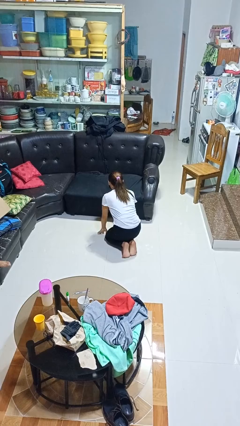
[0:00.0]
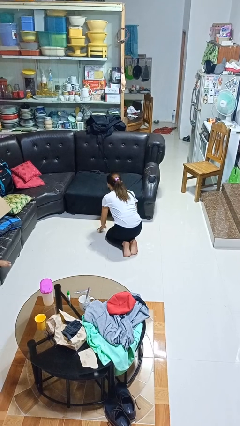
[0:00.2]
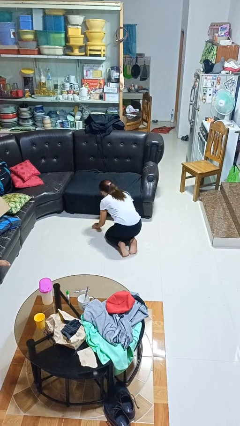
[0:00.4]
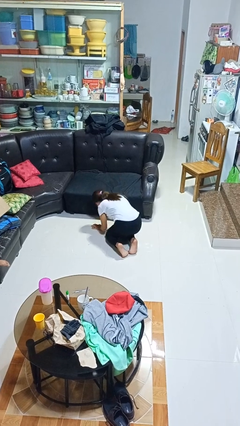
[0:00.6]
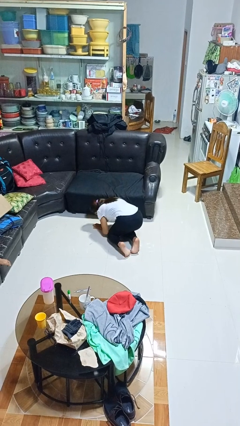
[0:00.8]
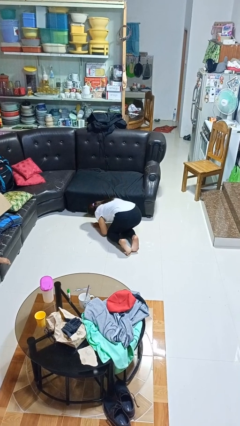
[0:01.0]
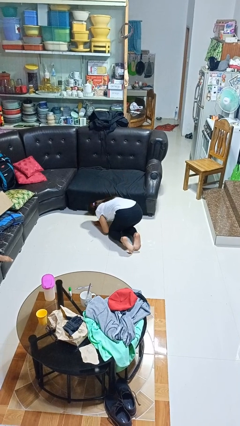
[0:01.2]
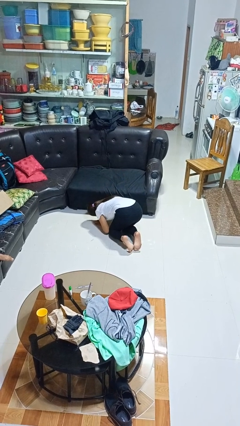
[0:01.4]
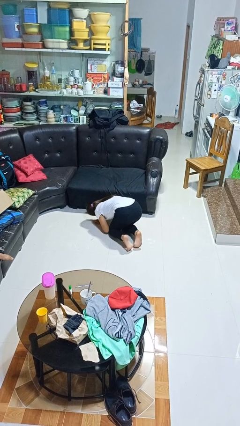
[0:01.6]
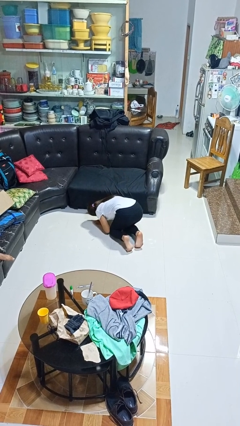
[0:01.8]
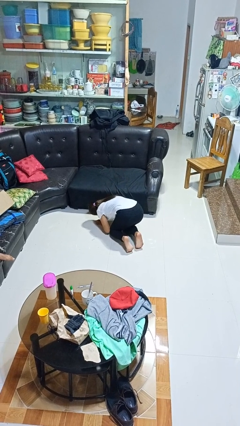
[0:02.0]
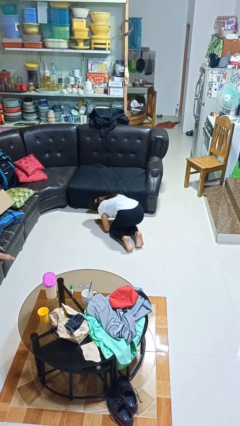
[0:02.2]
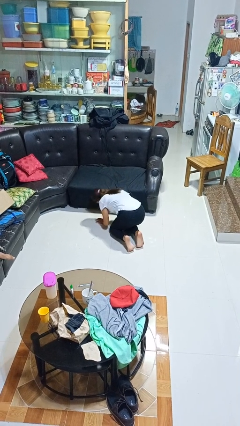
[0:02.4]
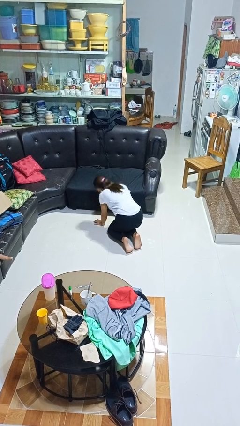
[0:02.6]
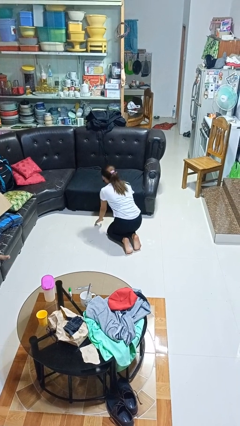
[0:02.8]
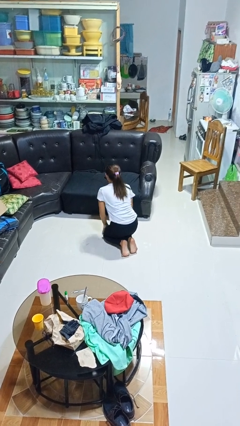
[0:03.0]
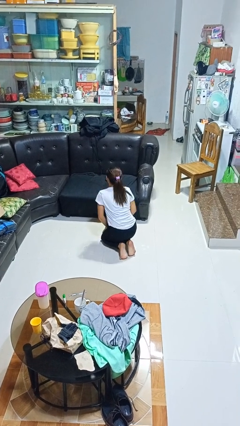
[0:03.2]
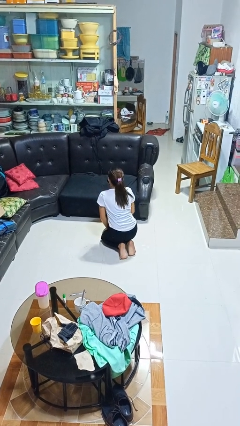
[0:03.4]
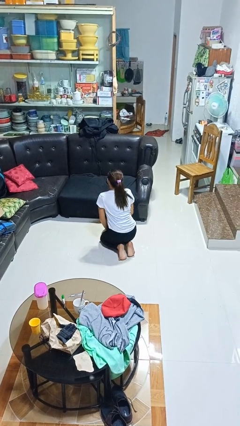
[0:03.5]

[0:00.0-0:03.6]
person searches under couch

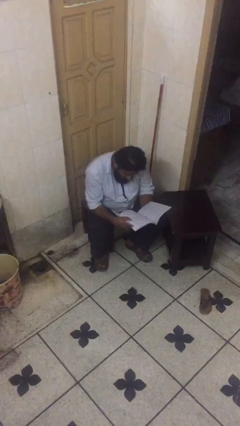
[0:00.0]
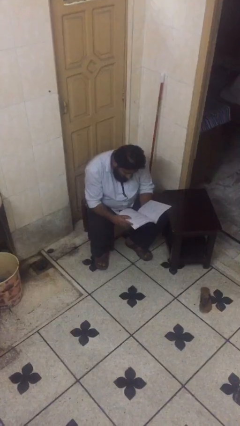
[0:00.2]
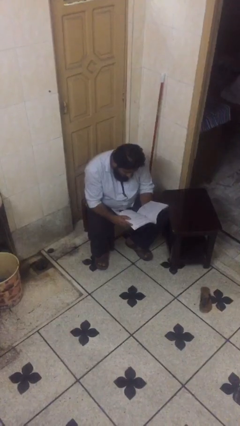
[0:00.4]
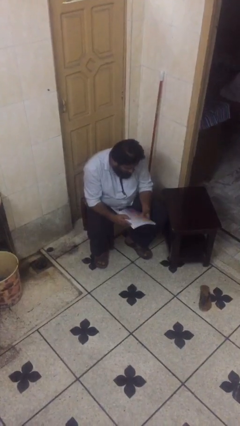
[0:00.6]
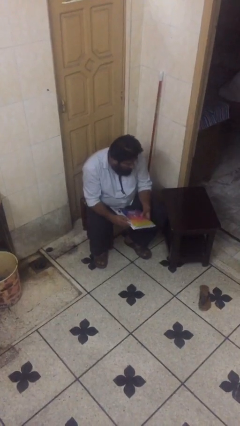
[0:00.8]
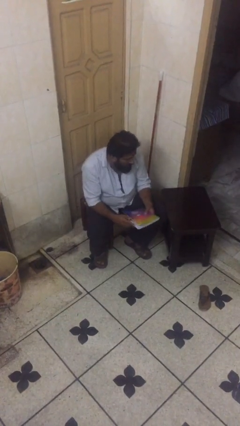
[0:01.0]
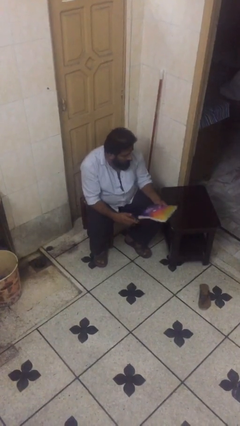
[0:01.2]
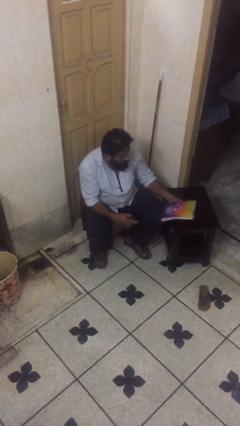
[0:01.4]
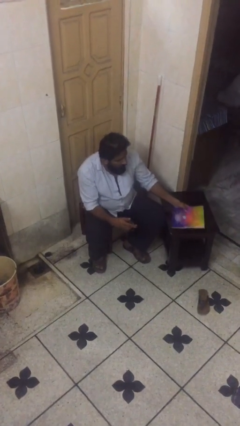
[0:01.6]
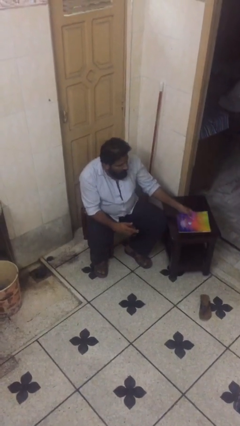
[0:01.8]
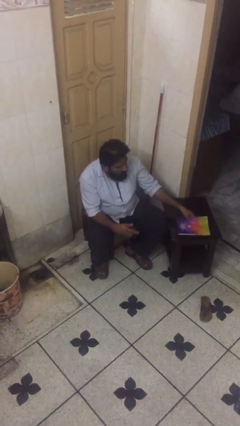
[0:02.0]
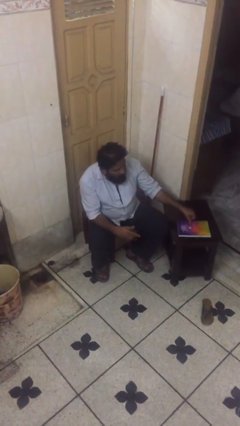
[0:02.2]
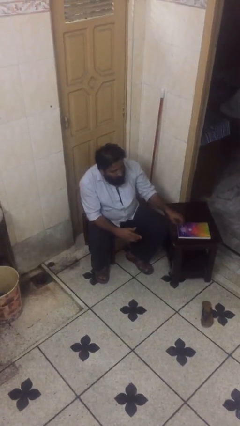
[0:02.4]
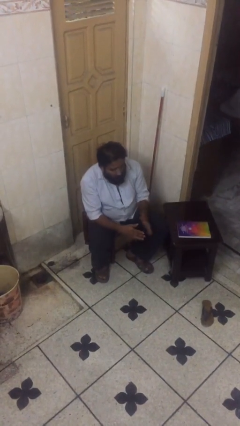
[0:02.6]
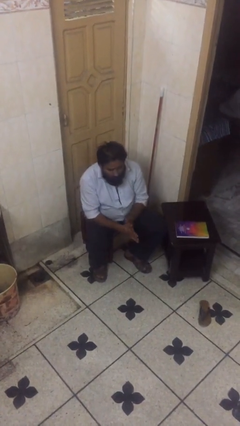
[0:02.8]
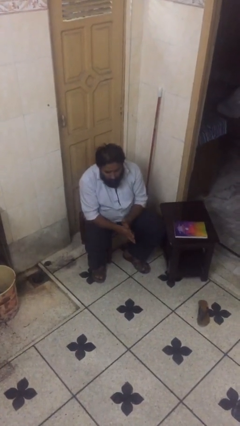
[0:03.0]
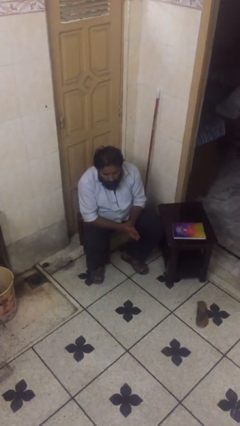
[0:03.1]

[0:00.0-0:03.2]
person puts down object on table

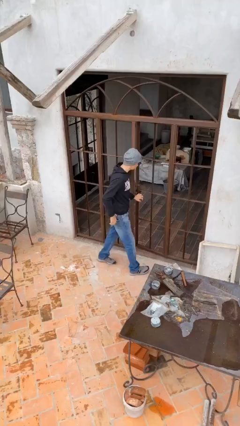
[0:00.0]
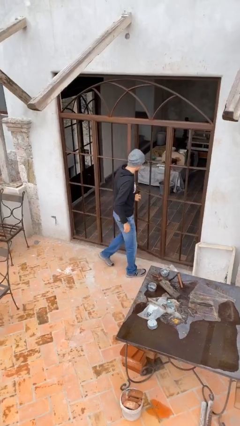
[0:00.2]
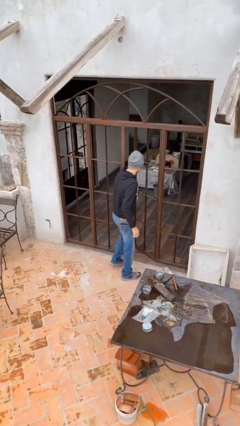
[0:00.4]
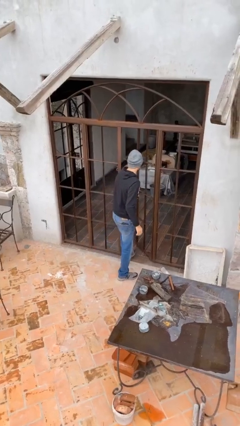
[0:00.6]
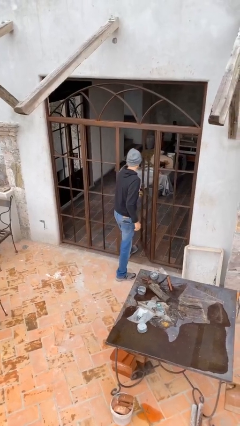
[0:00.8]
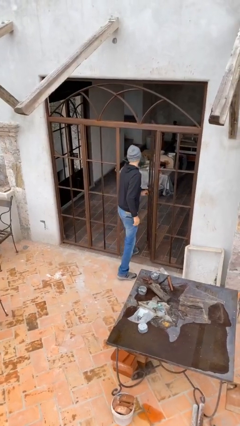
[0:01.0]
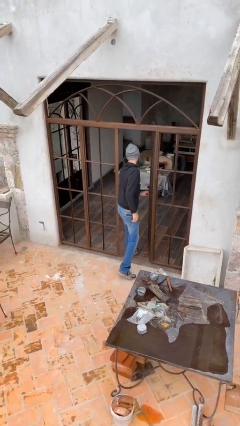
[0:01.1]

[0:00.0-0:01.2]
person opens facility door

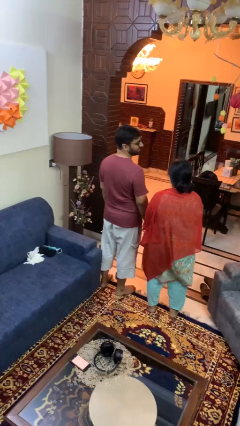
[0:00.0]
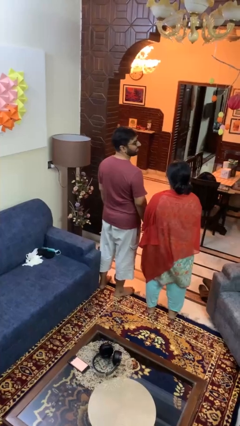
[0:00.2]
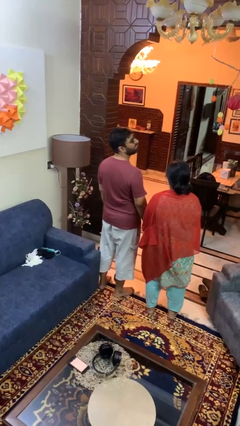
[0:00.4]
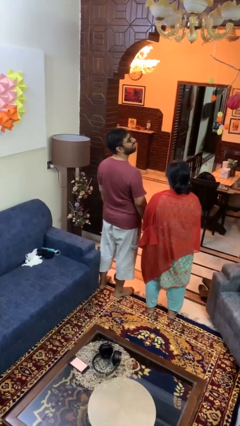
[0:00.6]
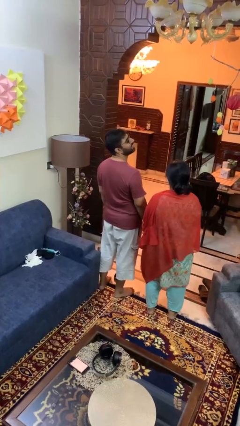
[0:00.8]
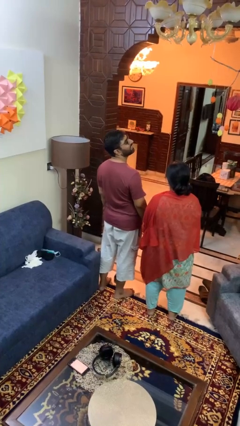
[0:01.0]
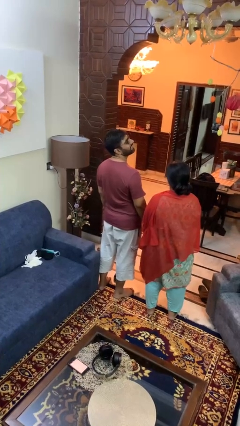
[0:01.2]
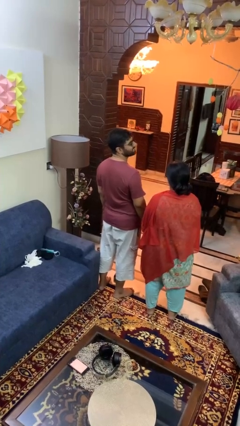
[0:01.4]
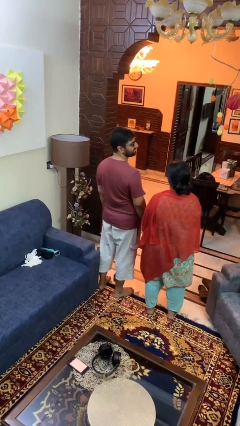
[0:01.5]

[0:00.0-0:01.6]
person laughs with person

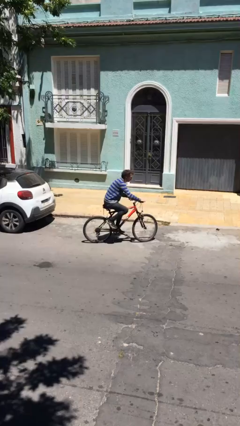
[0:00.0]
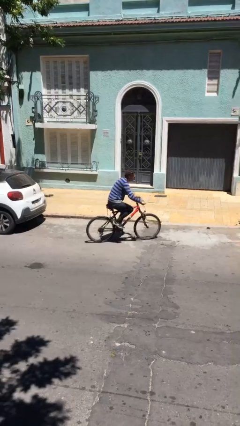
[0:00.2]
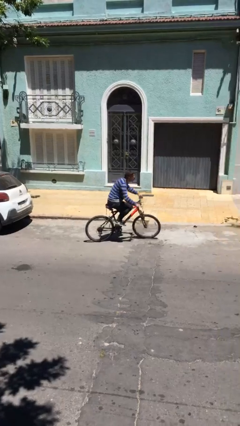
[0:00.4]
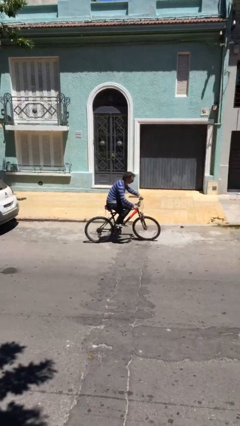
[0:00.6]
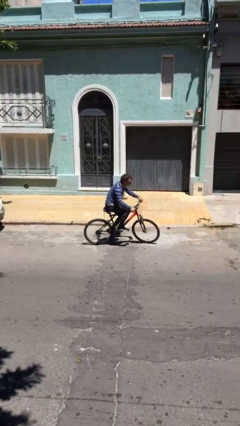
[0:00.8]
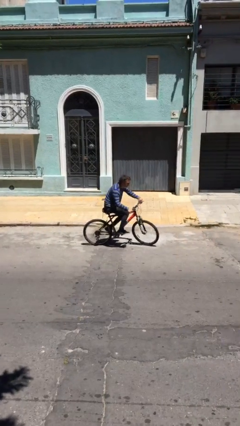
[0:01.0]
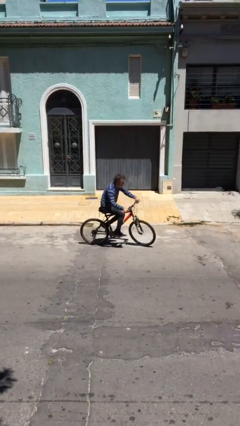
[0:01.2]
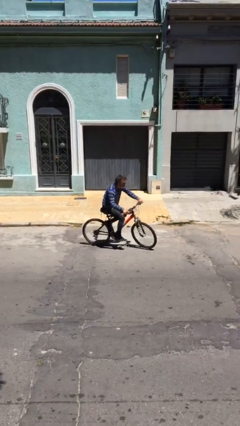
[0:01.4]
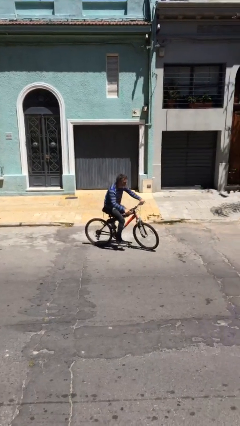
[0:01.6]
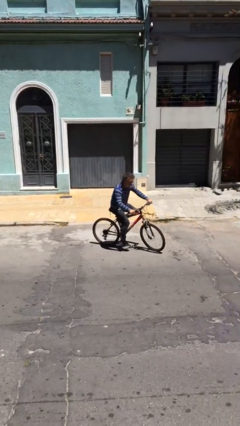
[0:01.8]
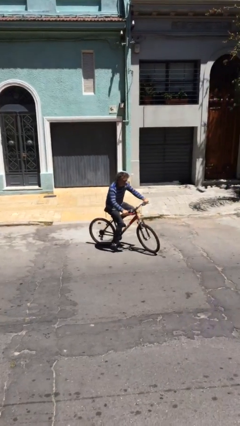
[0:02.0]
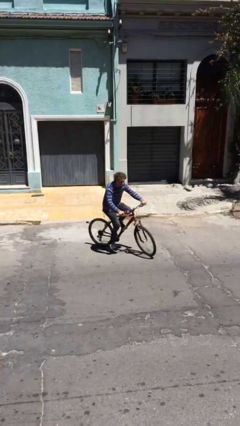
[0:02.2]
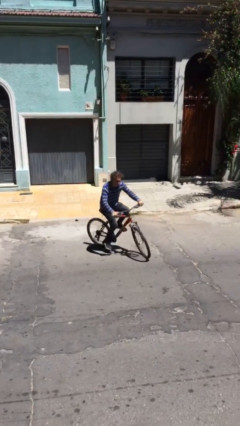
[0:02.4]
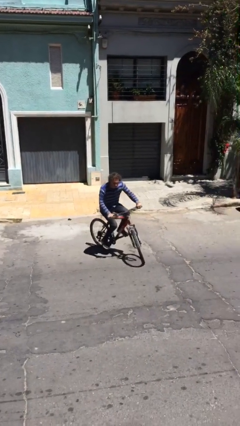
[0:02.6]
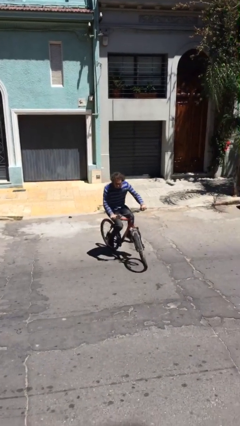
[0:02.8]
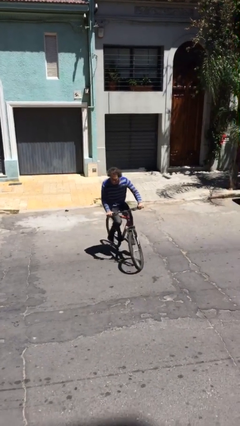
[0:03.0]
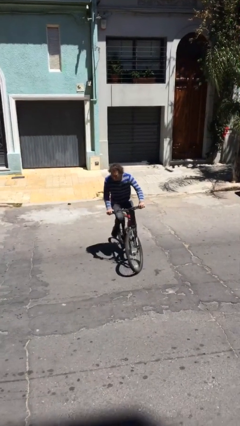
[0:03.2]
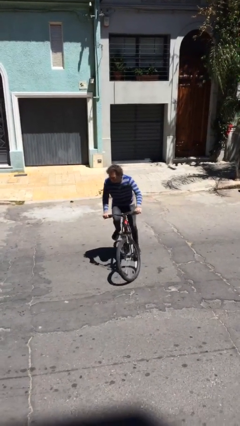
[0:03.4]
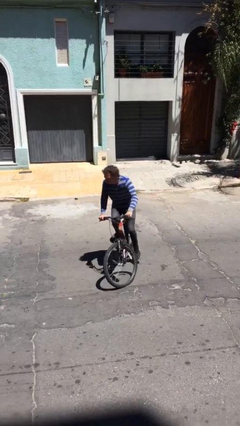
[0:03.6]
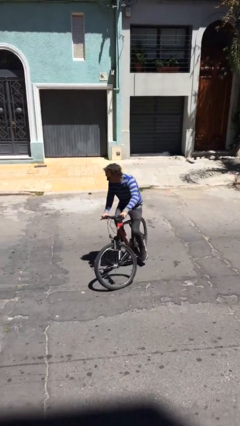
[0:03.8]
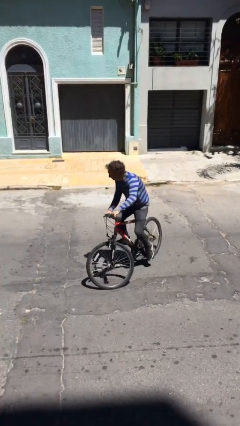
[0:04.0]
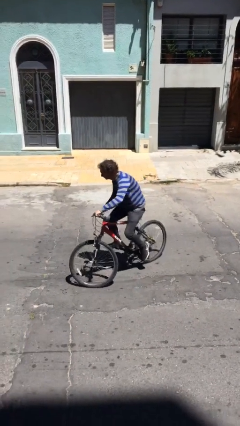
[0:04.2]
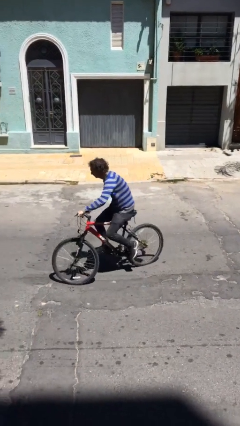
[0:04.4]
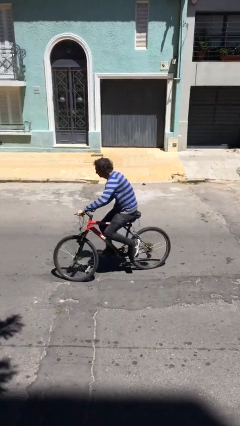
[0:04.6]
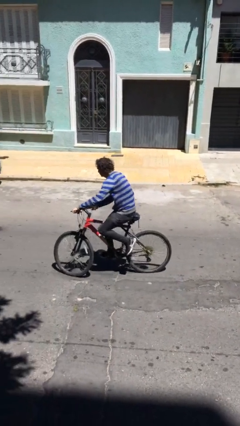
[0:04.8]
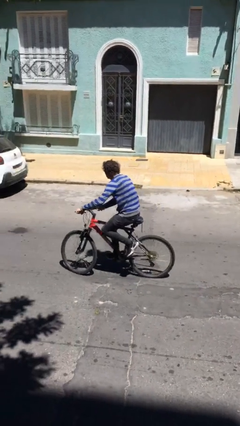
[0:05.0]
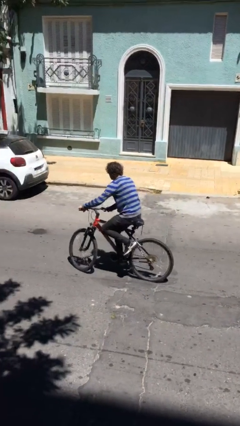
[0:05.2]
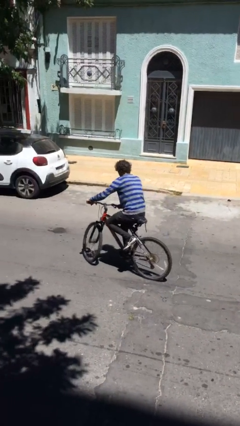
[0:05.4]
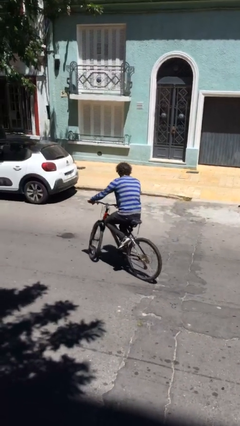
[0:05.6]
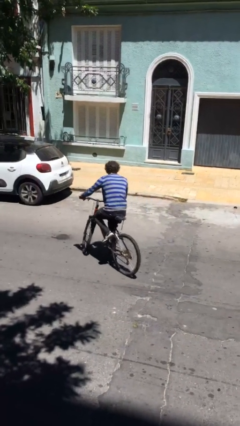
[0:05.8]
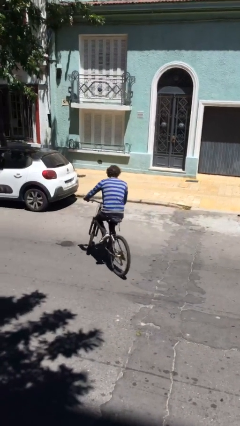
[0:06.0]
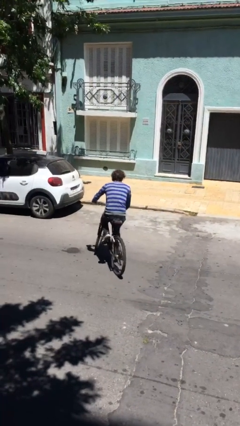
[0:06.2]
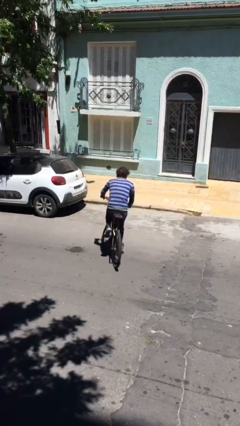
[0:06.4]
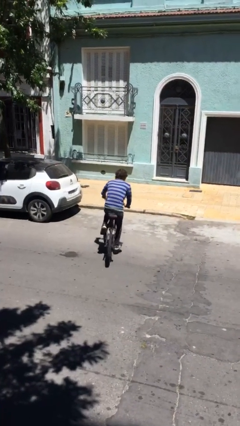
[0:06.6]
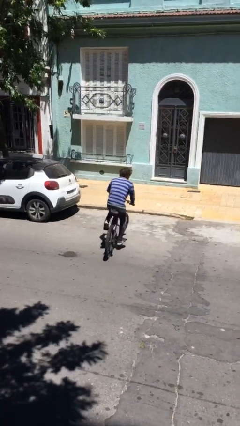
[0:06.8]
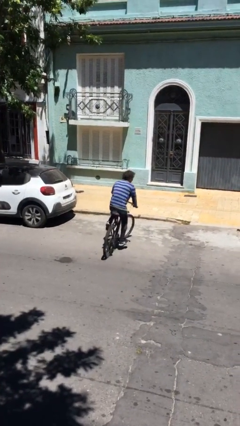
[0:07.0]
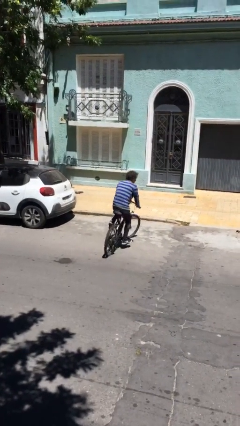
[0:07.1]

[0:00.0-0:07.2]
person rides bicycle

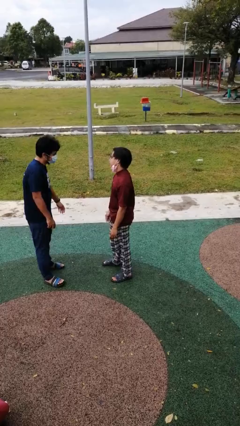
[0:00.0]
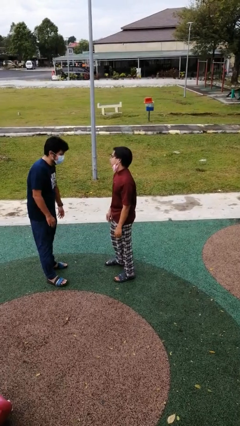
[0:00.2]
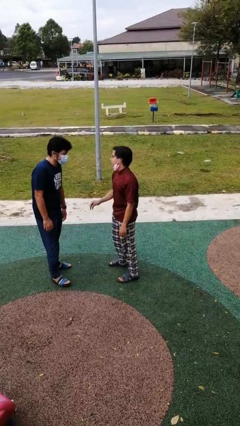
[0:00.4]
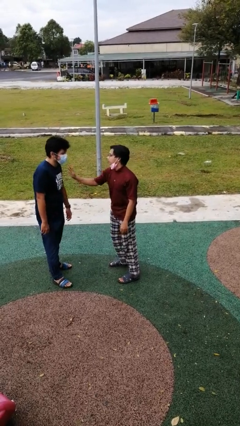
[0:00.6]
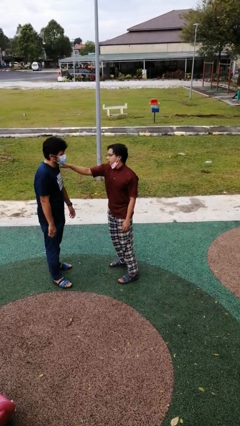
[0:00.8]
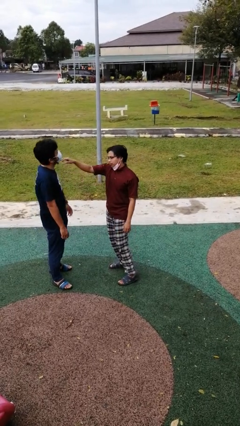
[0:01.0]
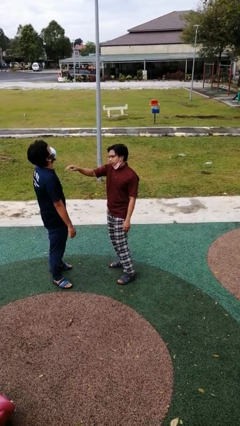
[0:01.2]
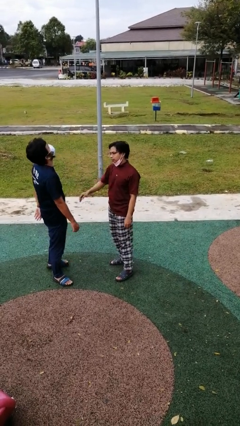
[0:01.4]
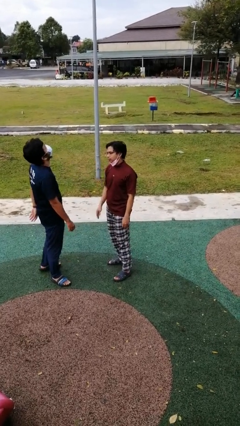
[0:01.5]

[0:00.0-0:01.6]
person shoves person
